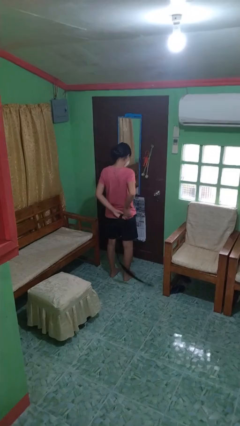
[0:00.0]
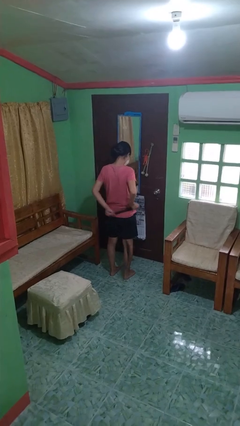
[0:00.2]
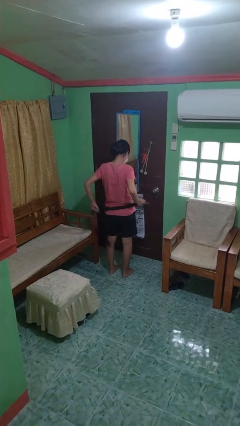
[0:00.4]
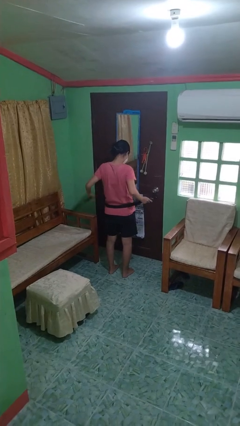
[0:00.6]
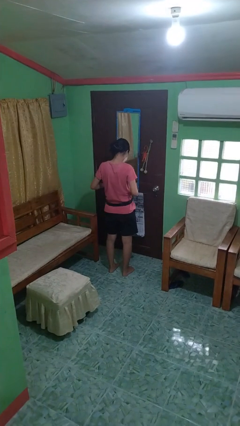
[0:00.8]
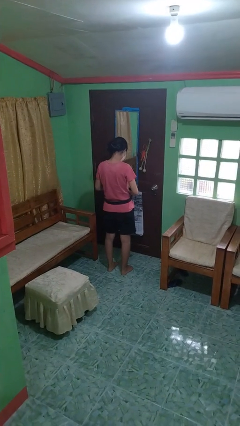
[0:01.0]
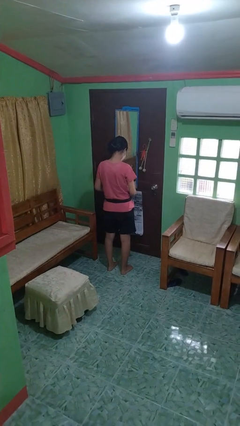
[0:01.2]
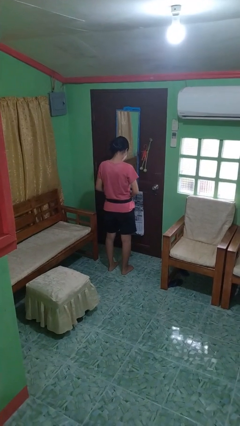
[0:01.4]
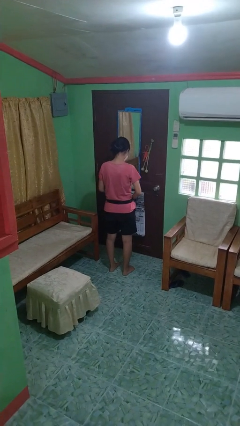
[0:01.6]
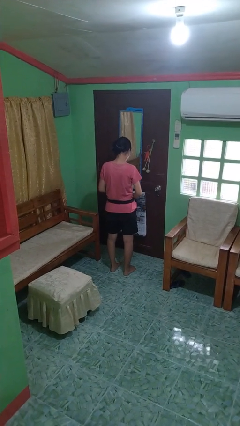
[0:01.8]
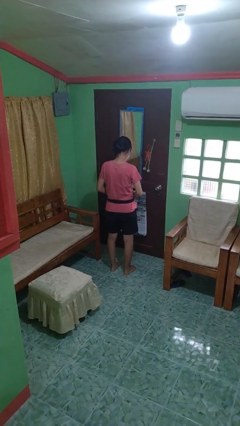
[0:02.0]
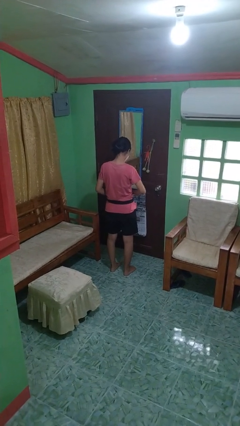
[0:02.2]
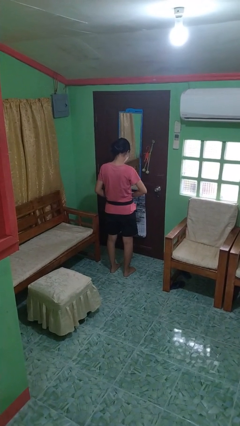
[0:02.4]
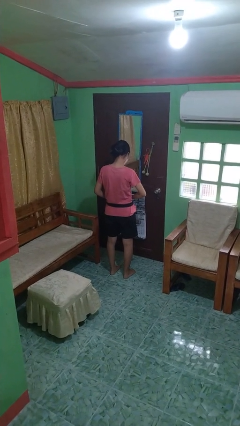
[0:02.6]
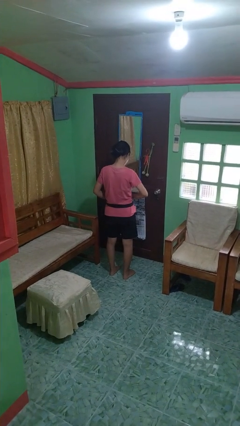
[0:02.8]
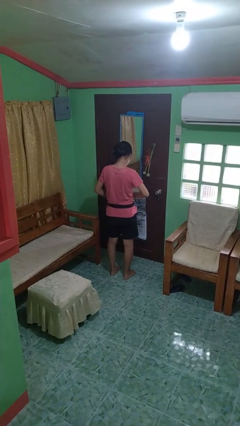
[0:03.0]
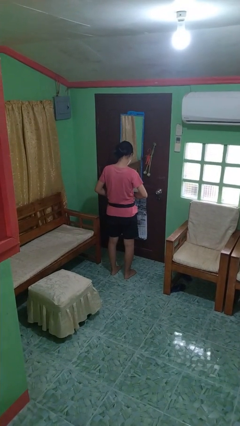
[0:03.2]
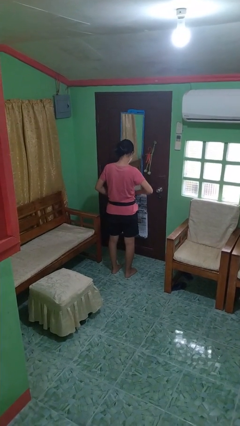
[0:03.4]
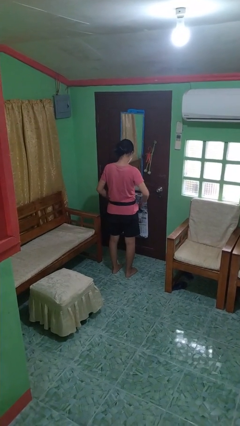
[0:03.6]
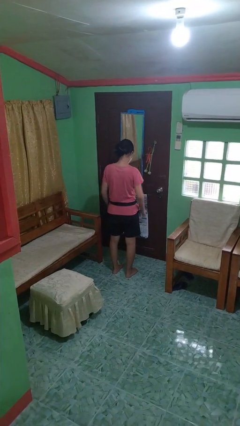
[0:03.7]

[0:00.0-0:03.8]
person puts on belt

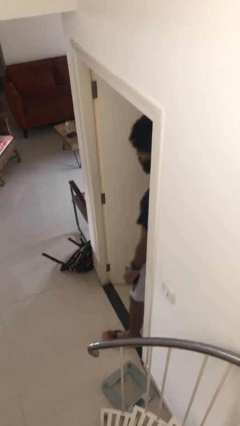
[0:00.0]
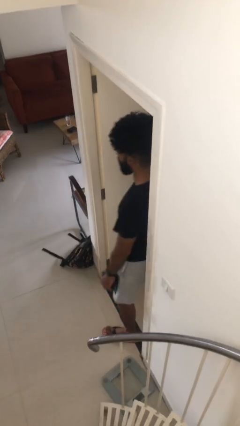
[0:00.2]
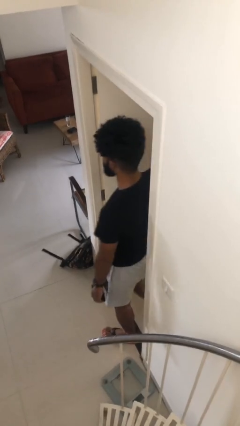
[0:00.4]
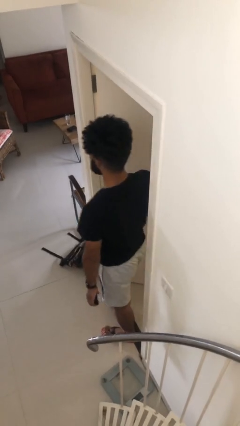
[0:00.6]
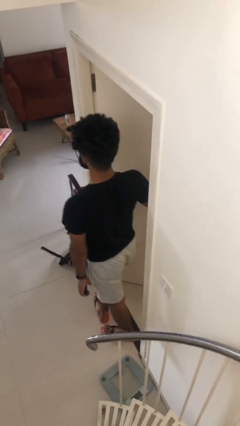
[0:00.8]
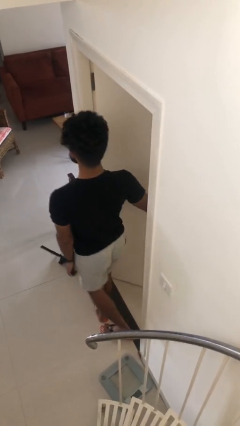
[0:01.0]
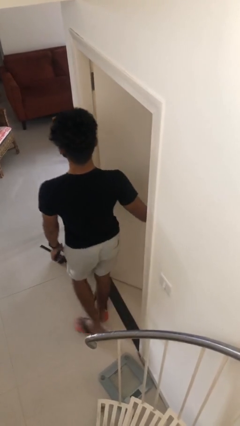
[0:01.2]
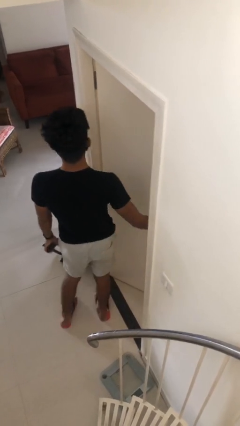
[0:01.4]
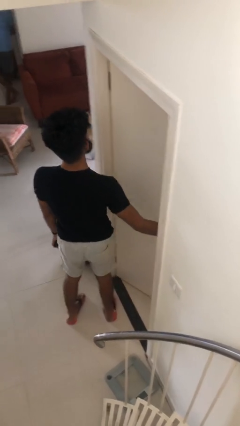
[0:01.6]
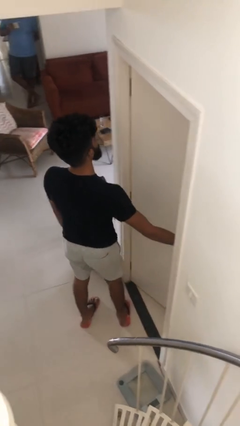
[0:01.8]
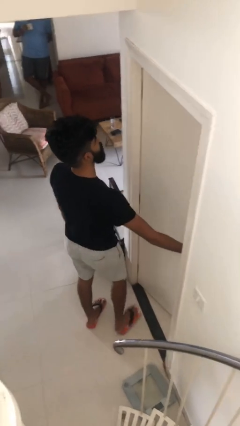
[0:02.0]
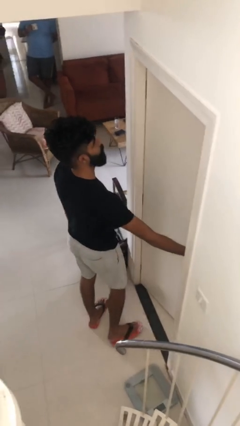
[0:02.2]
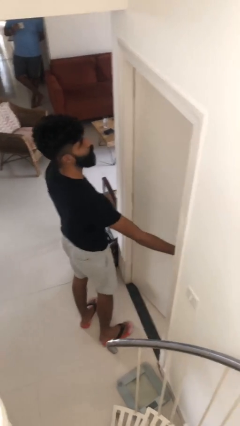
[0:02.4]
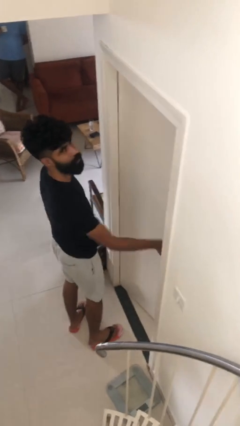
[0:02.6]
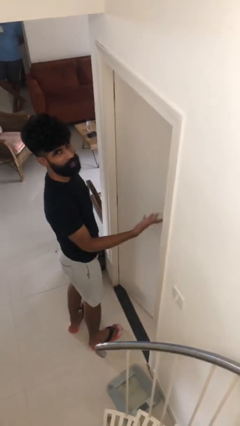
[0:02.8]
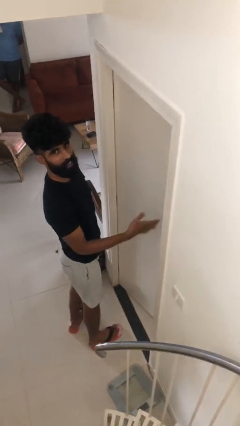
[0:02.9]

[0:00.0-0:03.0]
person enters scene through structure

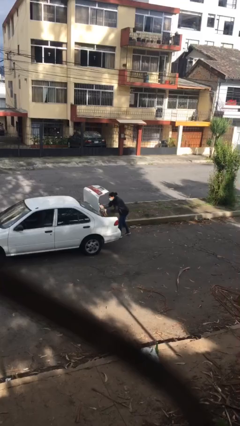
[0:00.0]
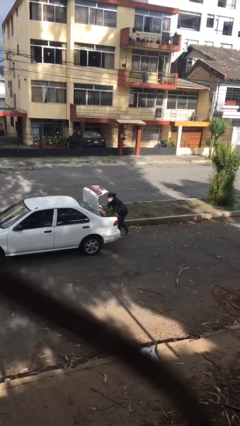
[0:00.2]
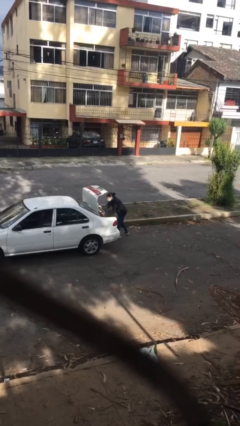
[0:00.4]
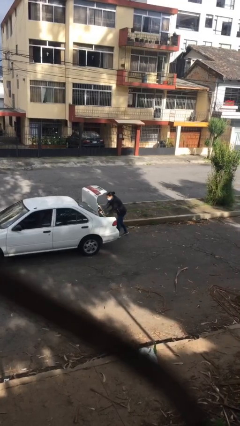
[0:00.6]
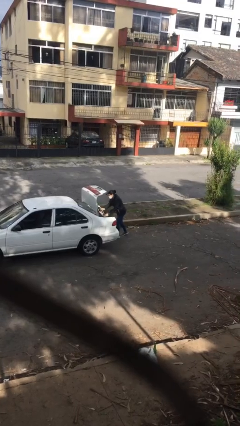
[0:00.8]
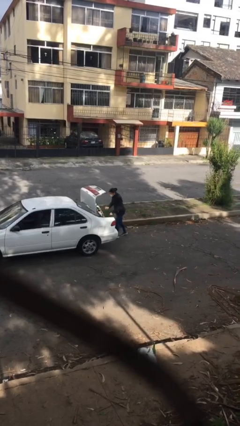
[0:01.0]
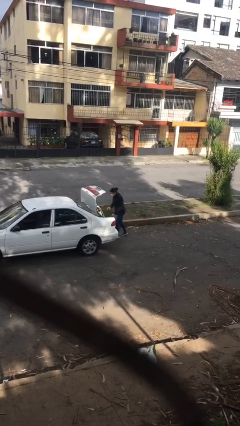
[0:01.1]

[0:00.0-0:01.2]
person loads car

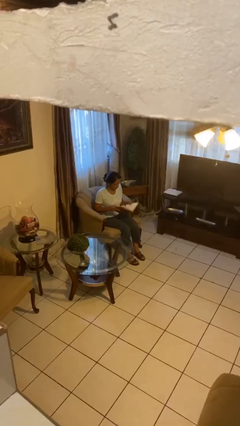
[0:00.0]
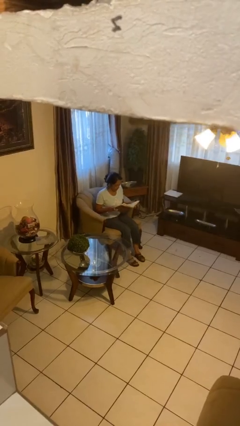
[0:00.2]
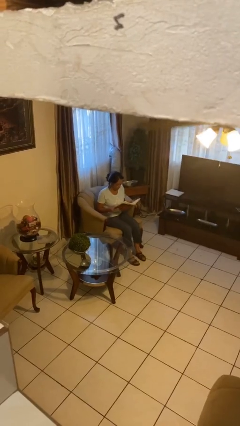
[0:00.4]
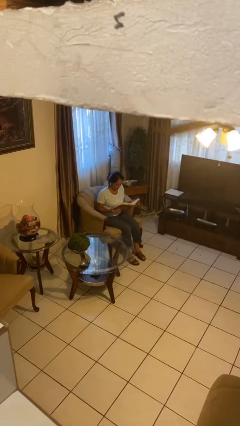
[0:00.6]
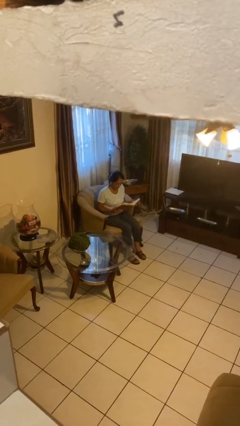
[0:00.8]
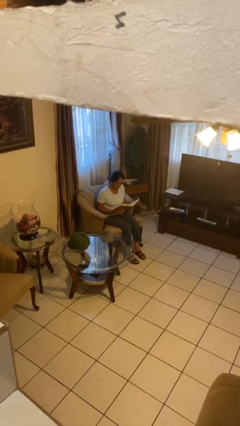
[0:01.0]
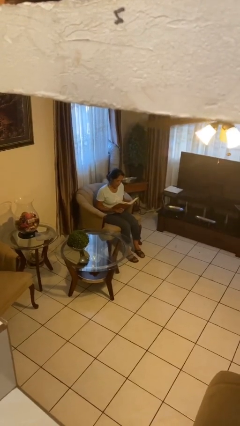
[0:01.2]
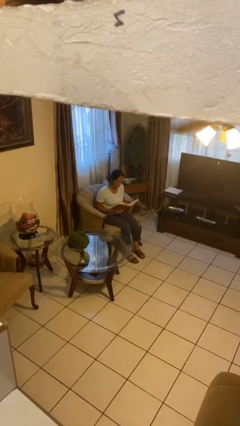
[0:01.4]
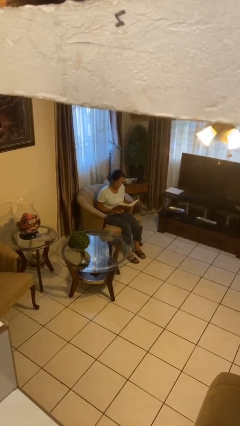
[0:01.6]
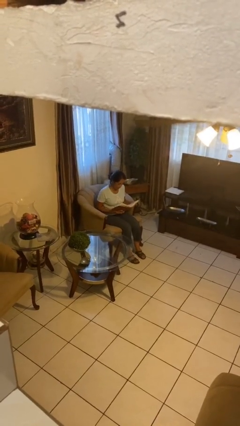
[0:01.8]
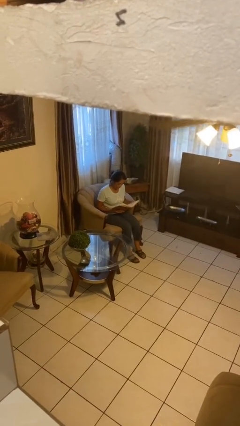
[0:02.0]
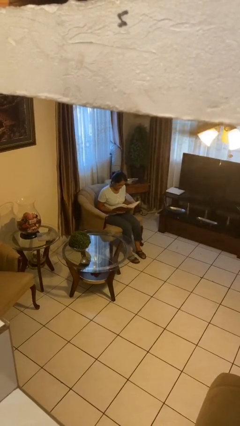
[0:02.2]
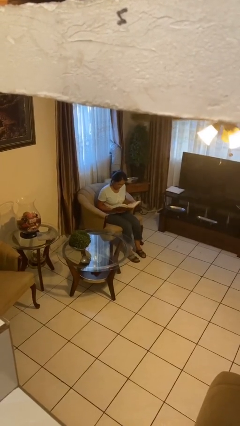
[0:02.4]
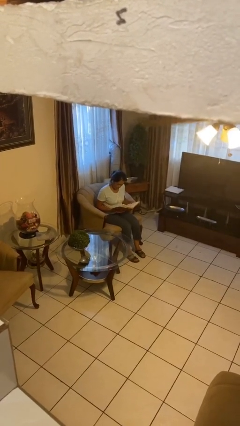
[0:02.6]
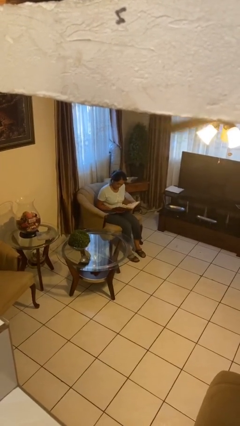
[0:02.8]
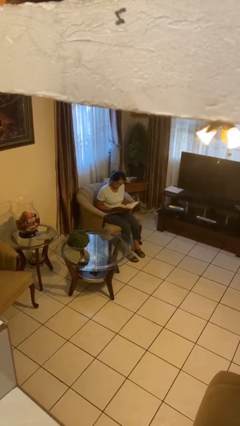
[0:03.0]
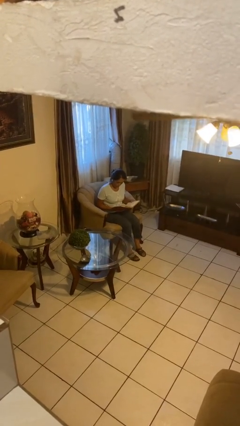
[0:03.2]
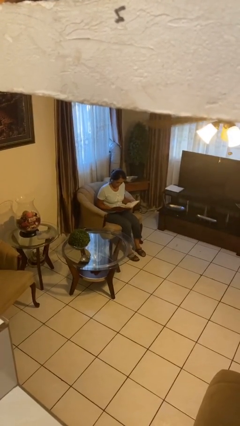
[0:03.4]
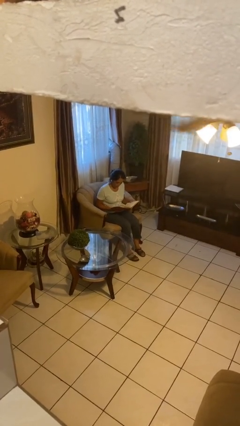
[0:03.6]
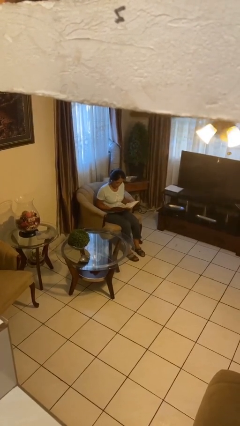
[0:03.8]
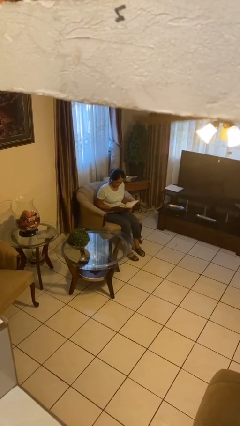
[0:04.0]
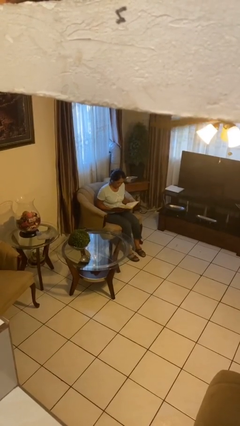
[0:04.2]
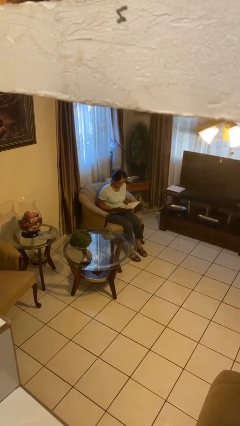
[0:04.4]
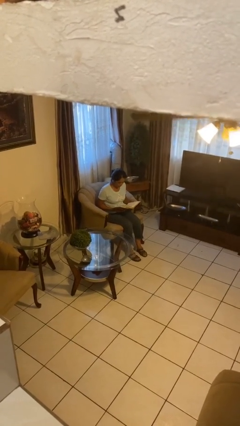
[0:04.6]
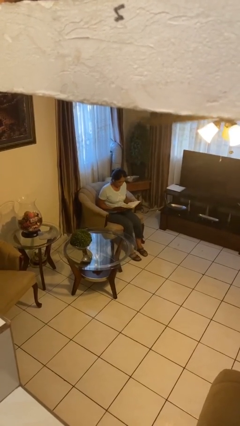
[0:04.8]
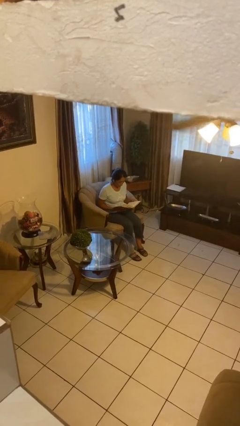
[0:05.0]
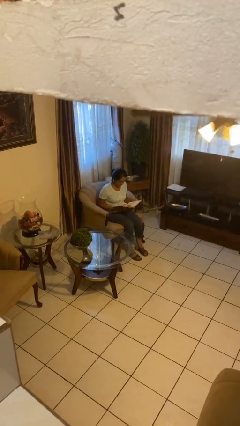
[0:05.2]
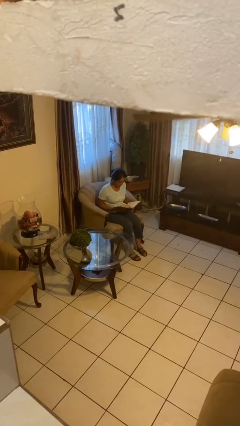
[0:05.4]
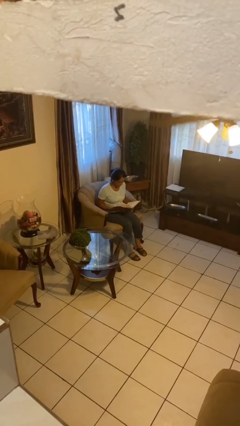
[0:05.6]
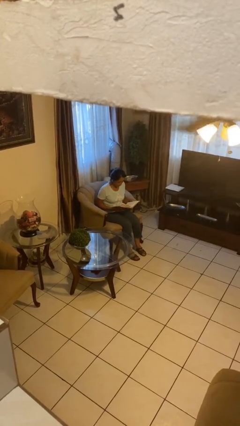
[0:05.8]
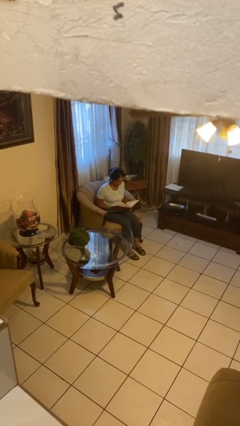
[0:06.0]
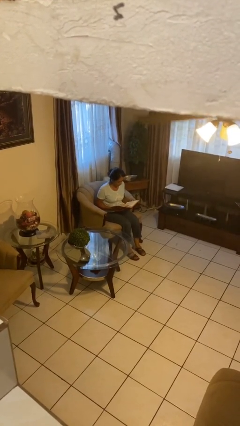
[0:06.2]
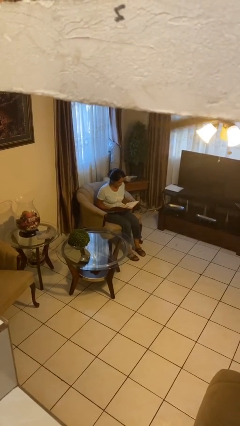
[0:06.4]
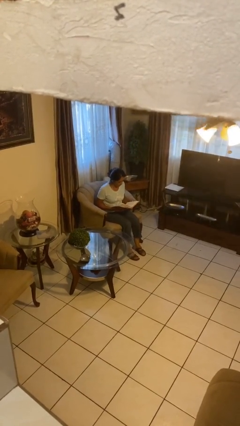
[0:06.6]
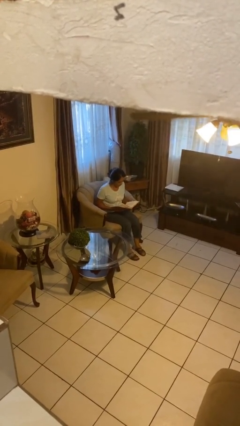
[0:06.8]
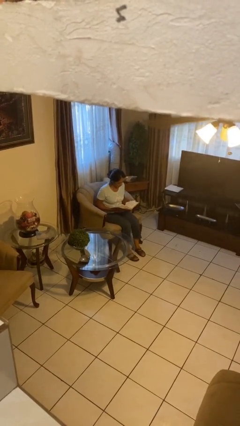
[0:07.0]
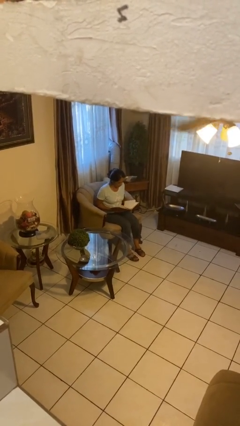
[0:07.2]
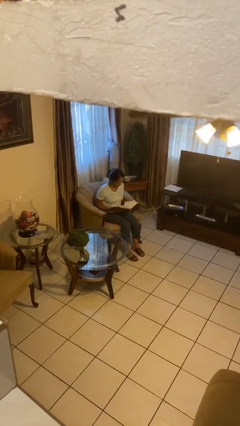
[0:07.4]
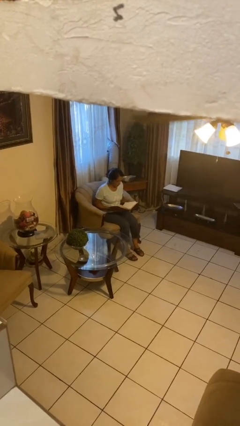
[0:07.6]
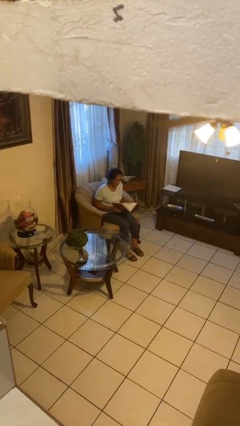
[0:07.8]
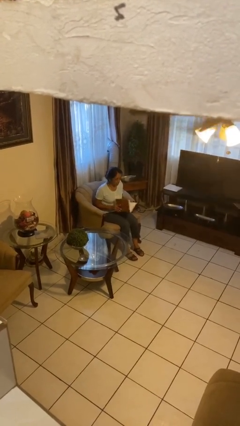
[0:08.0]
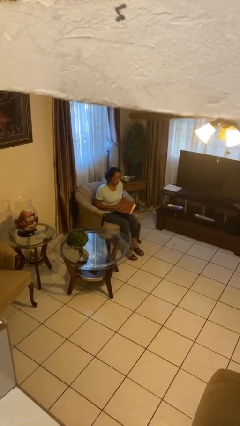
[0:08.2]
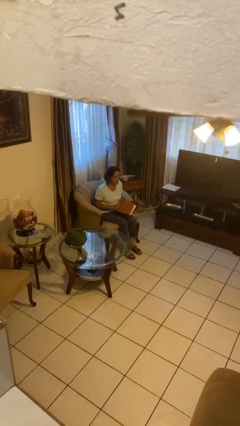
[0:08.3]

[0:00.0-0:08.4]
person reads document

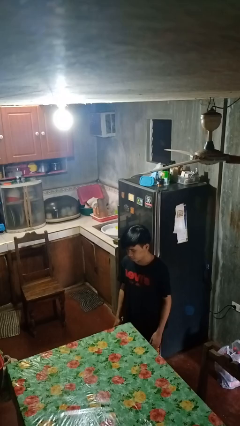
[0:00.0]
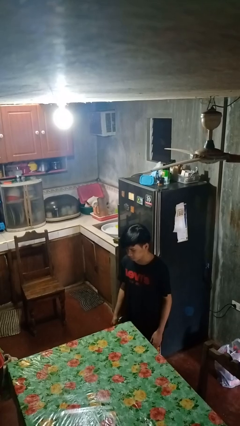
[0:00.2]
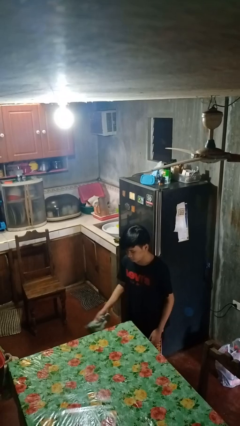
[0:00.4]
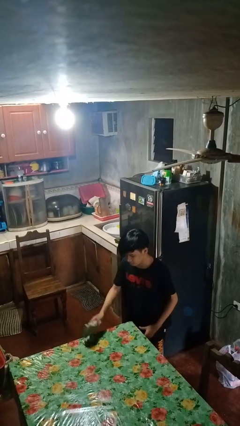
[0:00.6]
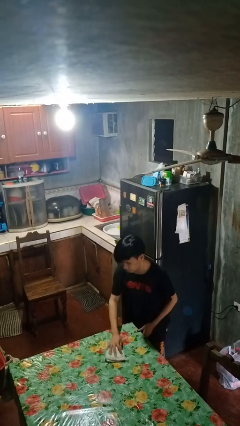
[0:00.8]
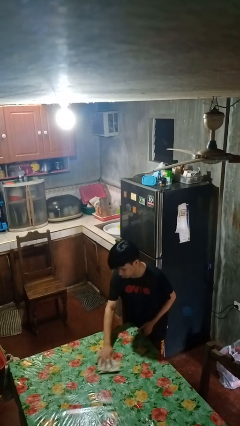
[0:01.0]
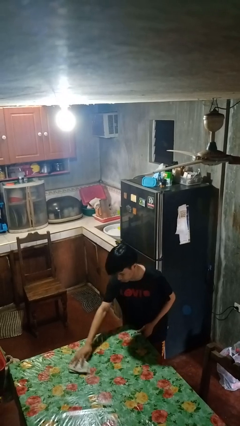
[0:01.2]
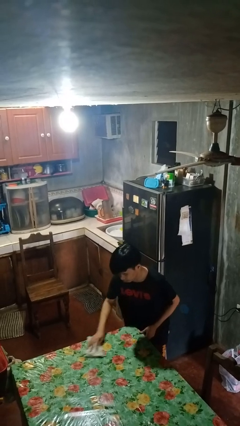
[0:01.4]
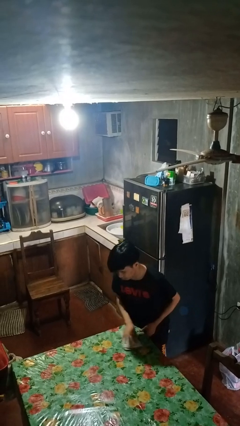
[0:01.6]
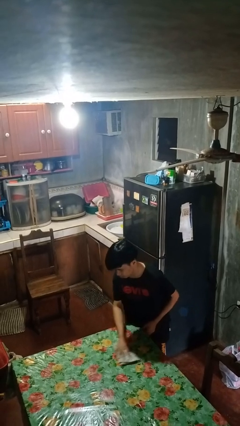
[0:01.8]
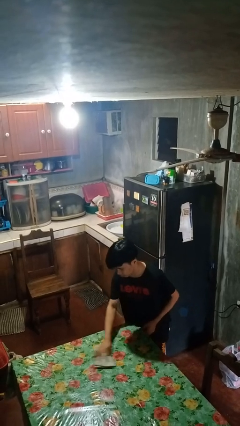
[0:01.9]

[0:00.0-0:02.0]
person cleans table with rag
